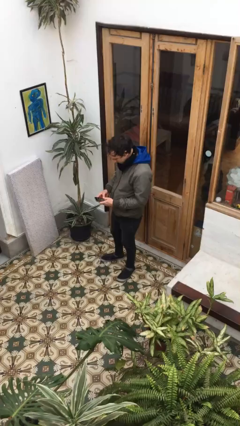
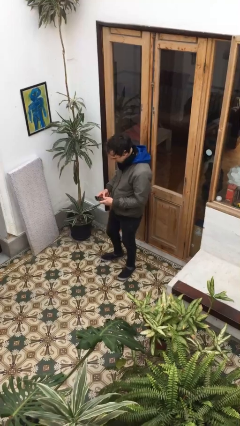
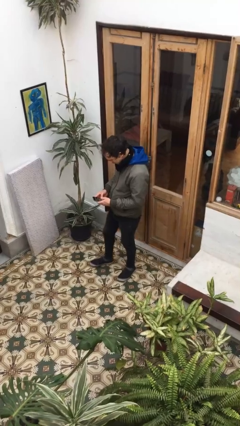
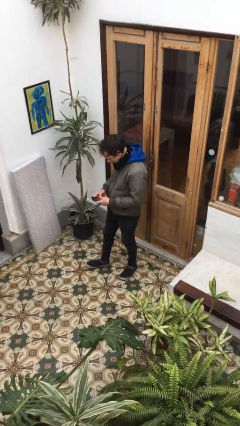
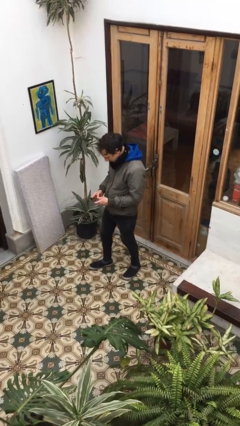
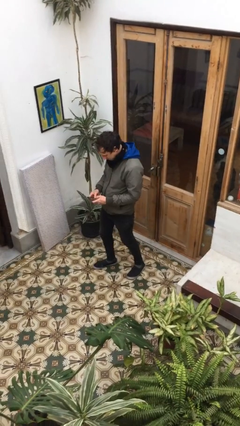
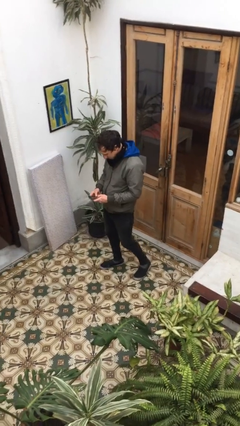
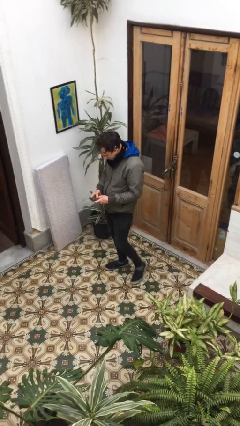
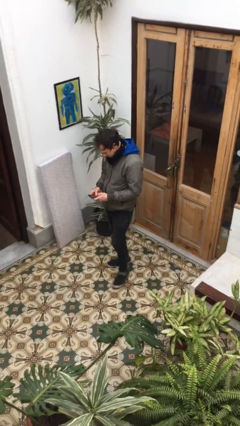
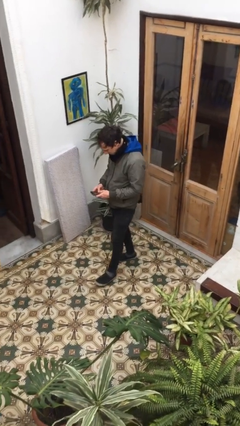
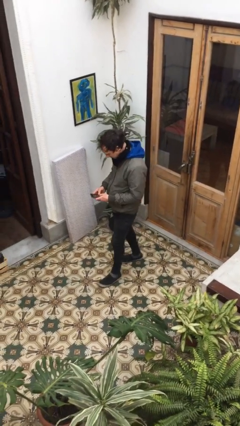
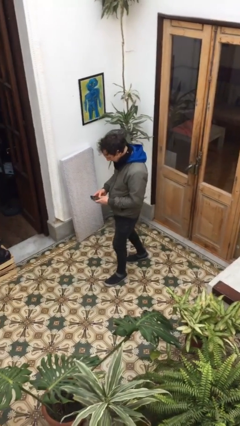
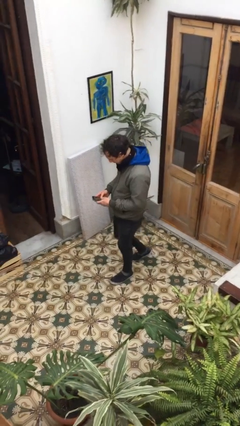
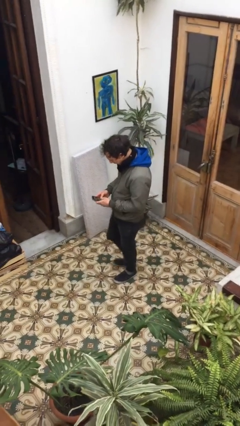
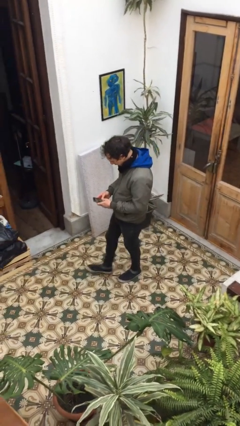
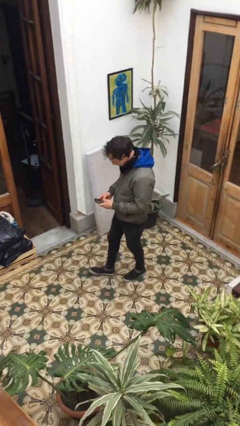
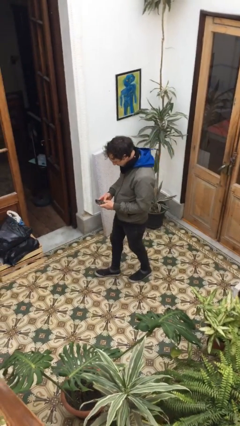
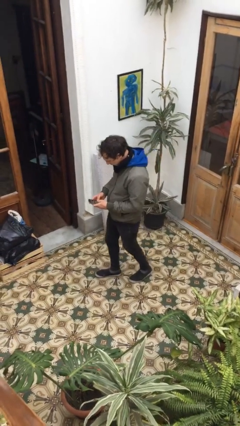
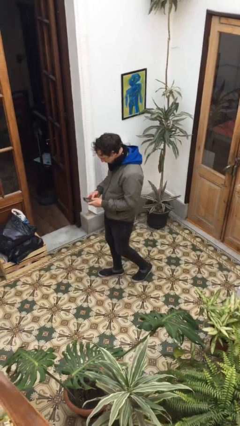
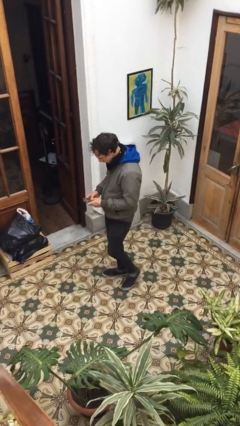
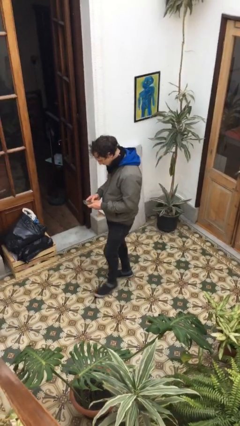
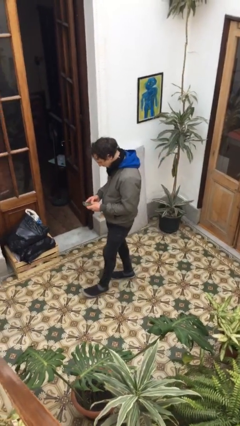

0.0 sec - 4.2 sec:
person texts on phone

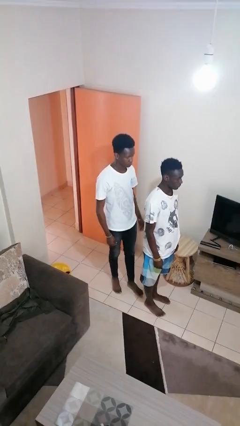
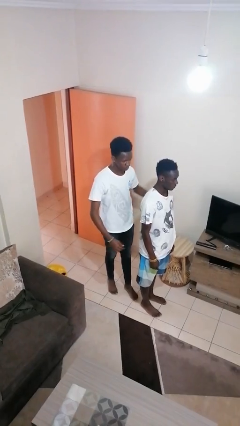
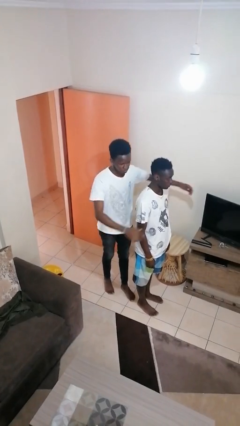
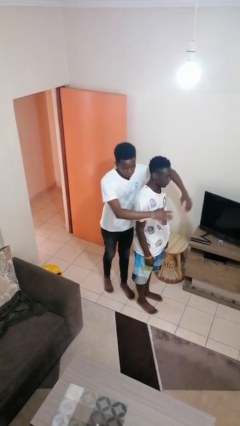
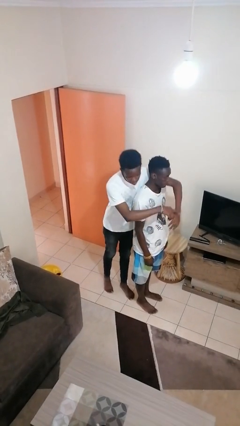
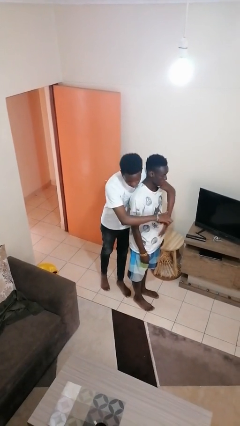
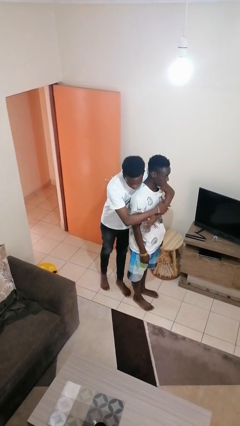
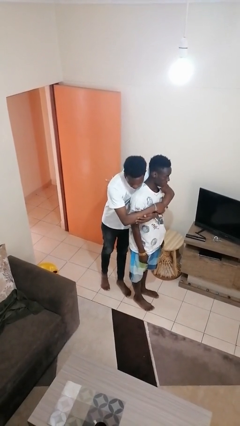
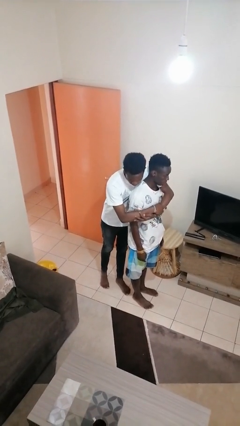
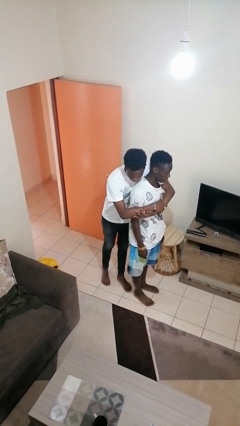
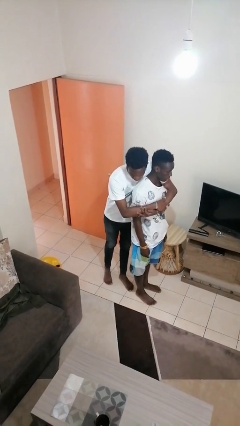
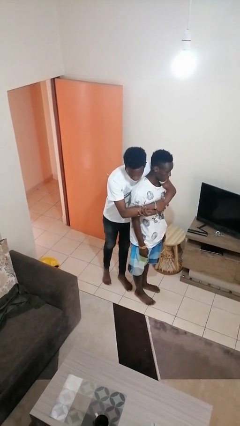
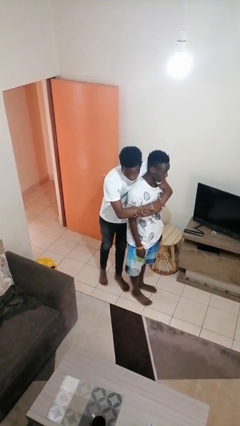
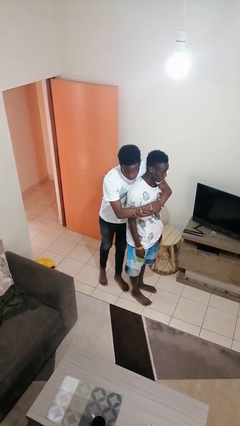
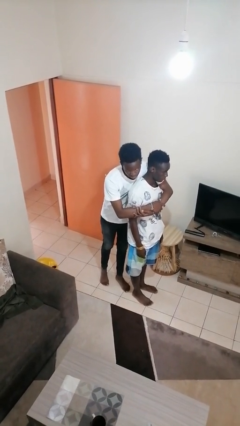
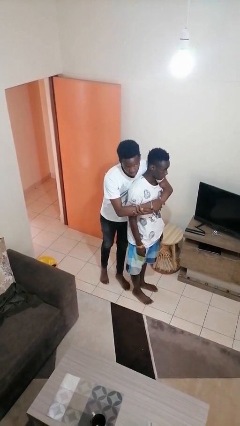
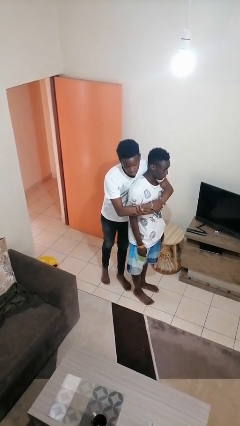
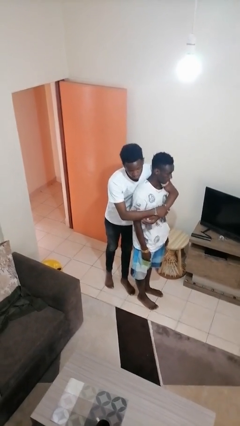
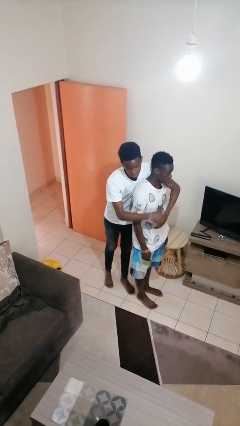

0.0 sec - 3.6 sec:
person hugs person from behind

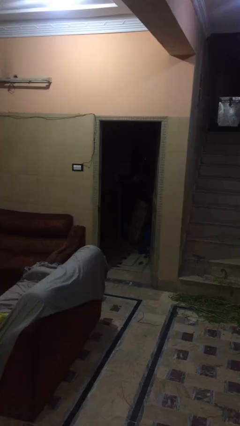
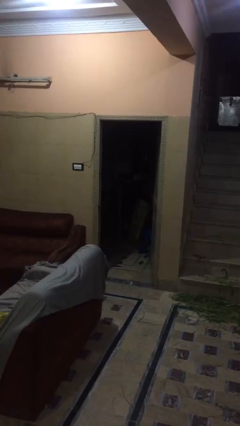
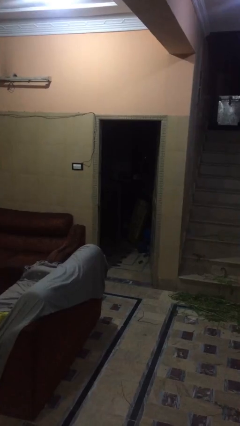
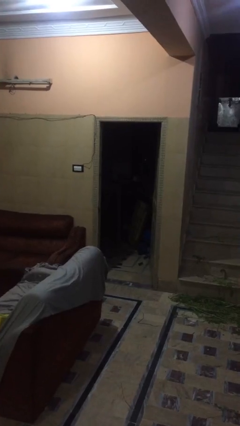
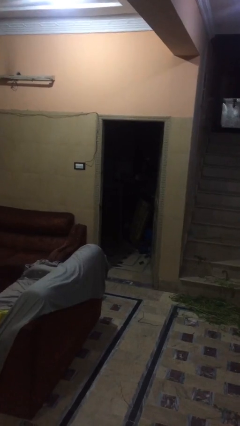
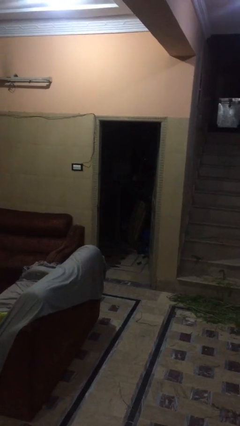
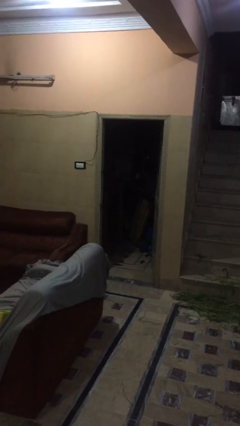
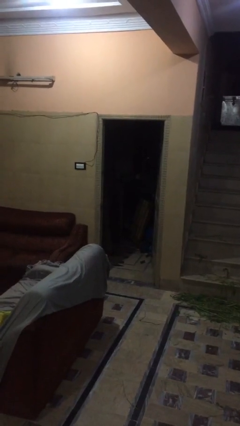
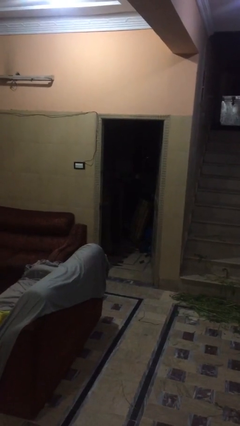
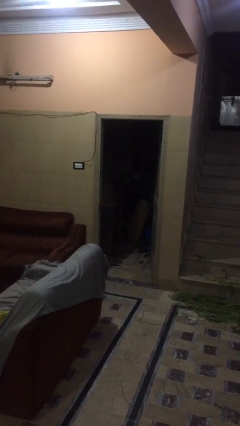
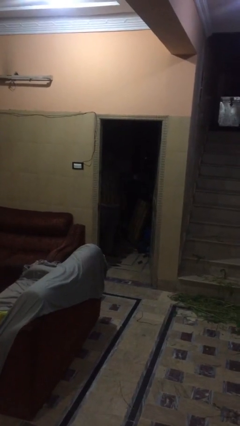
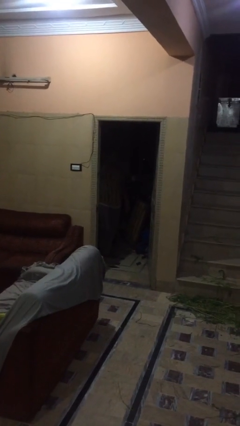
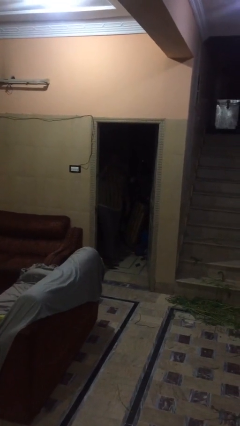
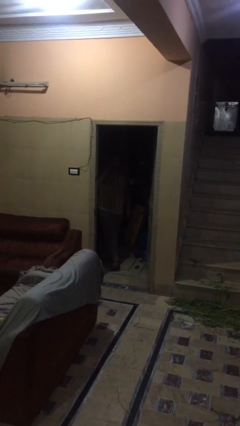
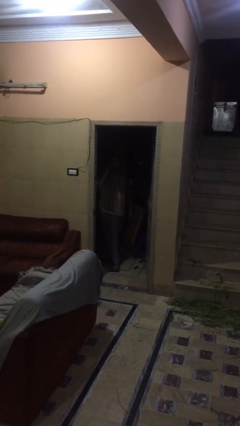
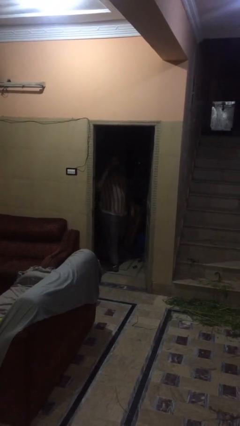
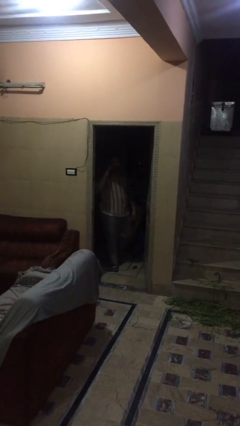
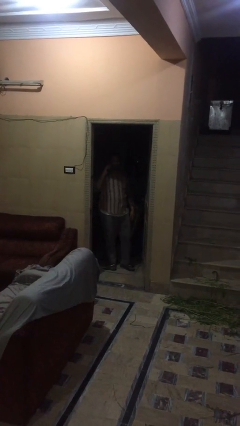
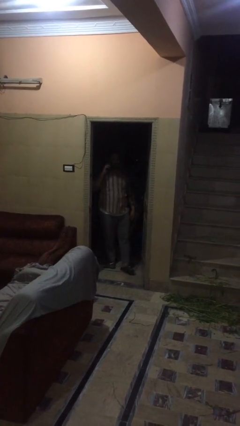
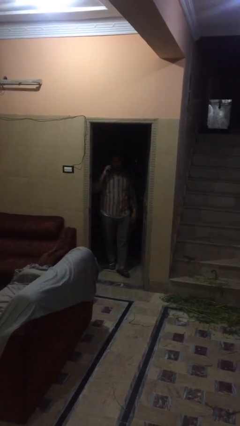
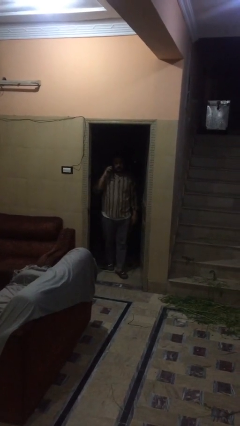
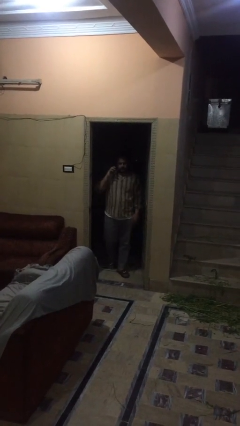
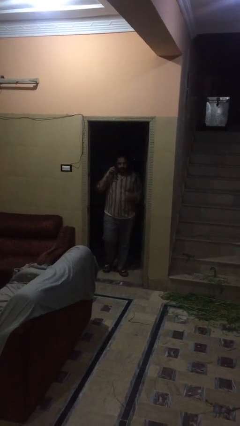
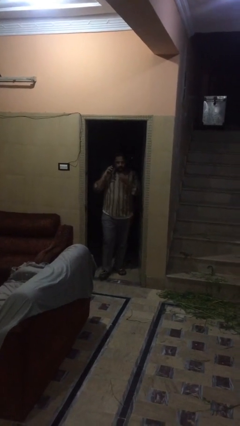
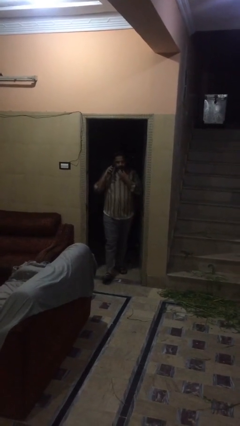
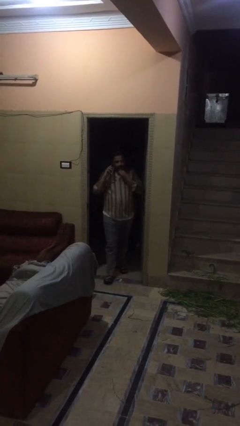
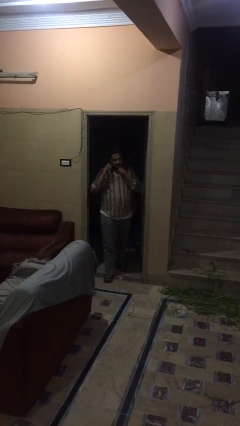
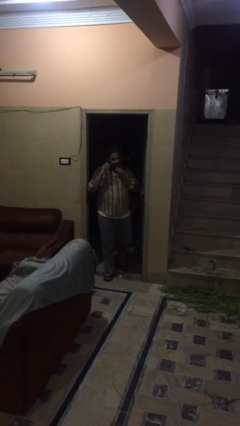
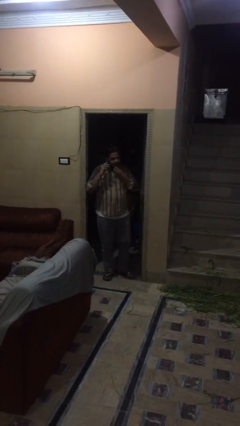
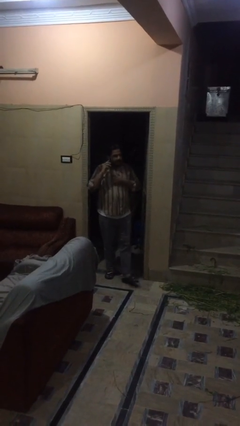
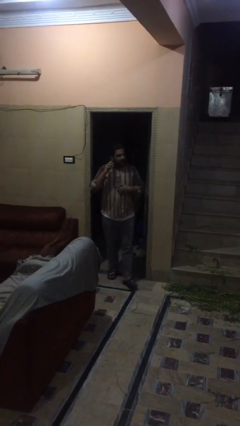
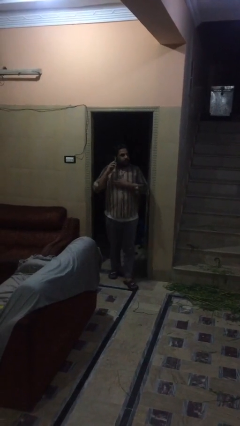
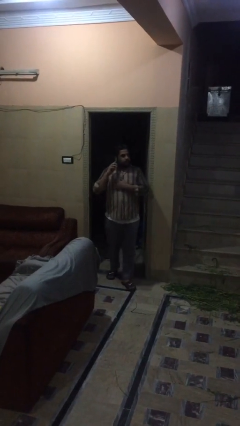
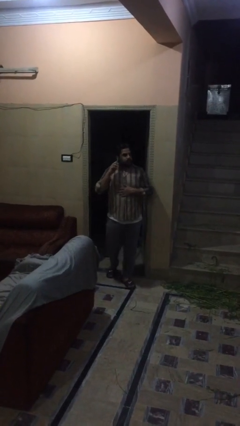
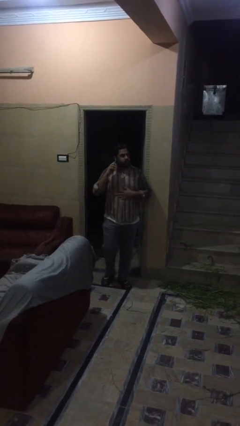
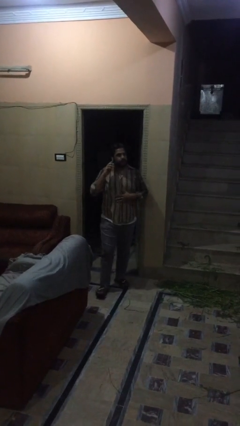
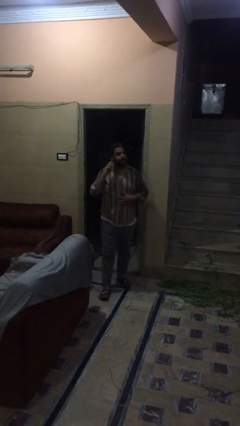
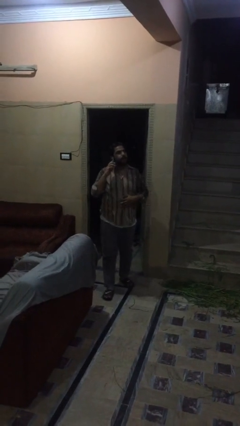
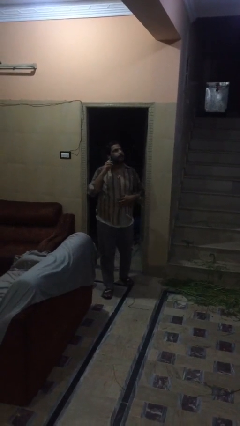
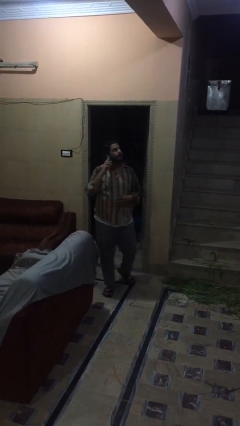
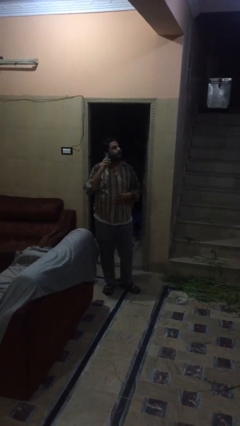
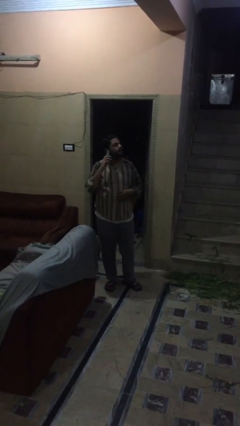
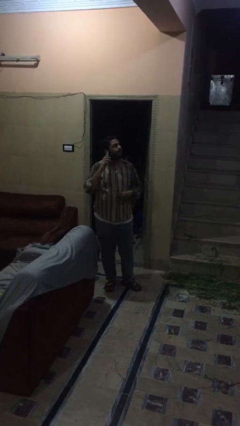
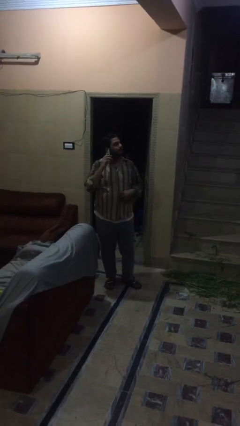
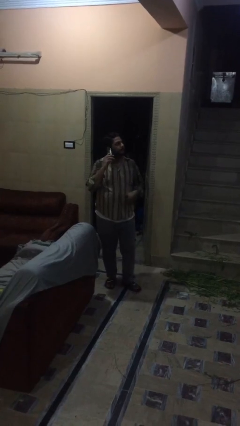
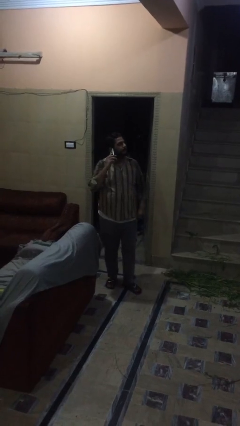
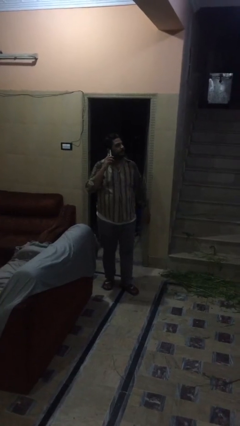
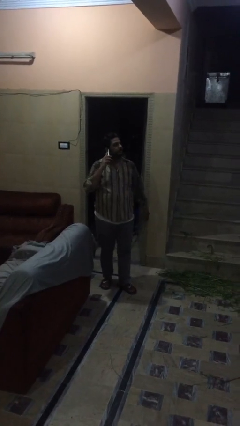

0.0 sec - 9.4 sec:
person enters scene through structure

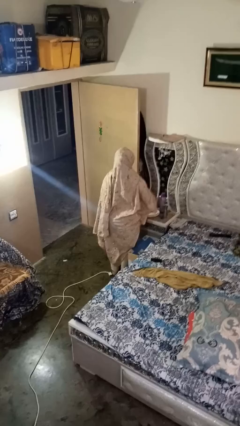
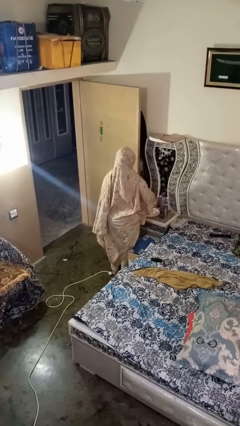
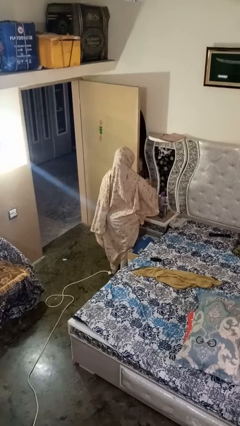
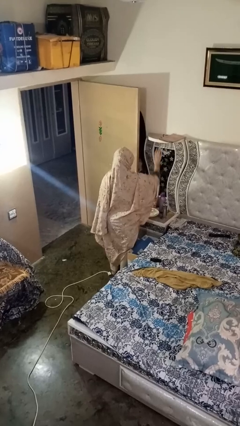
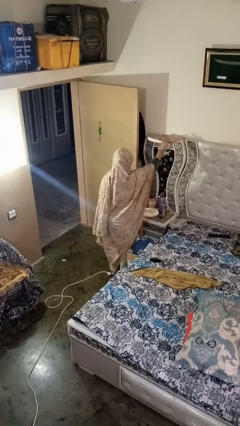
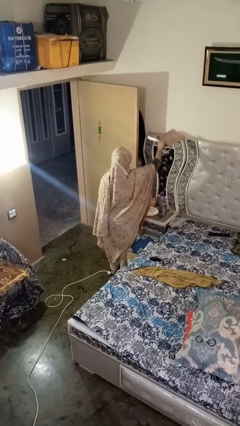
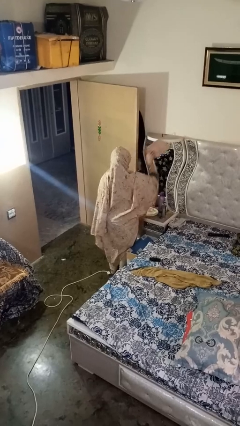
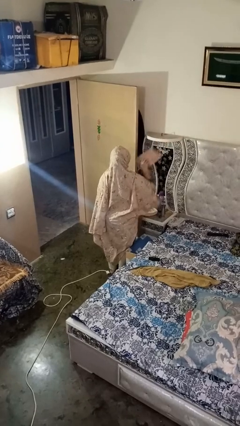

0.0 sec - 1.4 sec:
person picks up object from shelf
